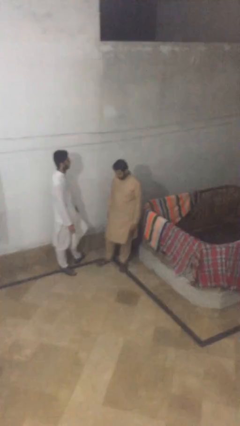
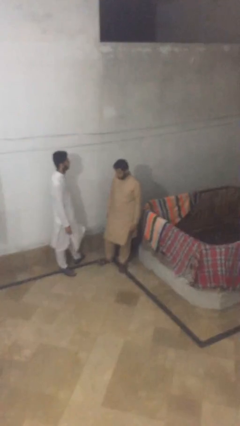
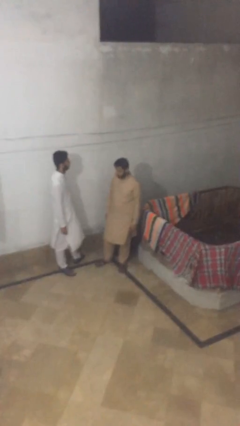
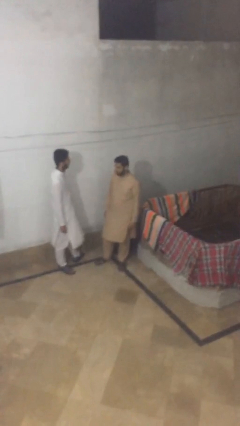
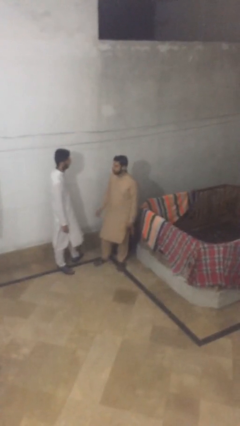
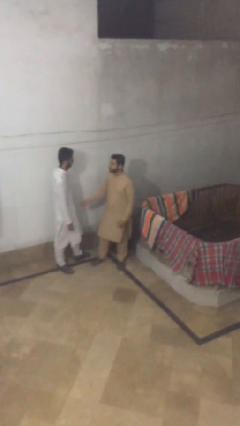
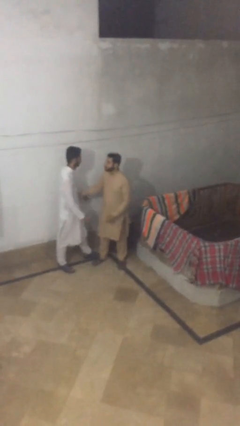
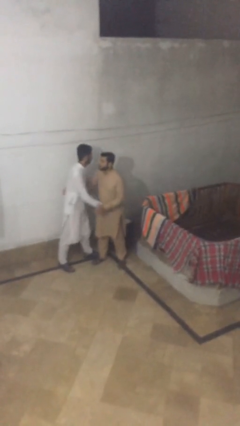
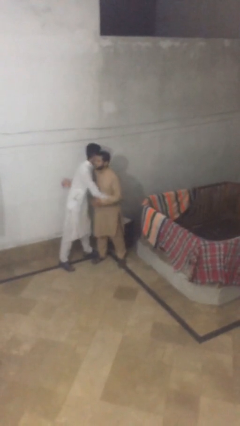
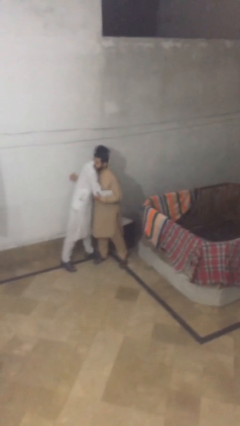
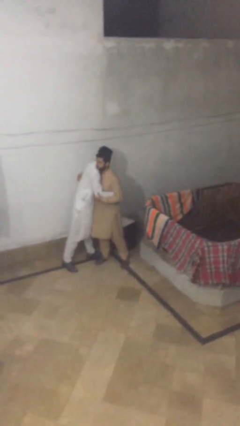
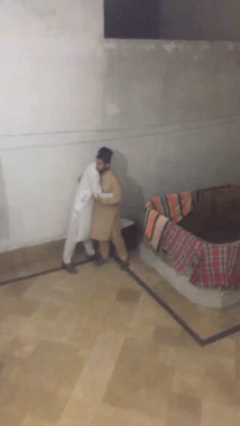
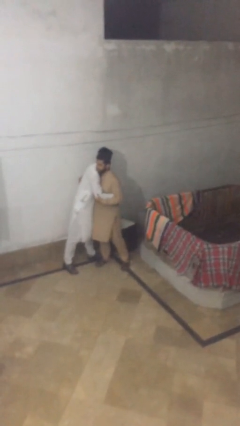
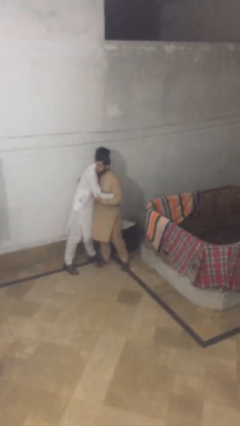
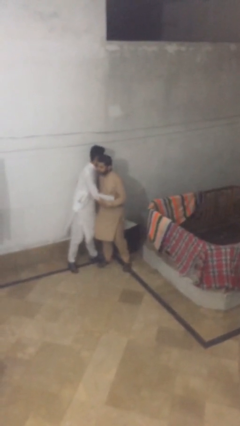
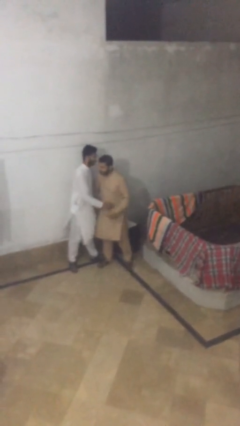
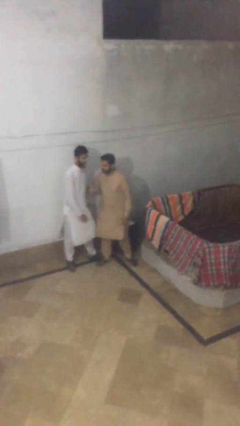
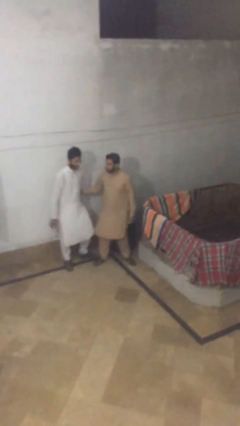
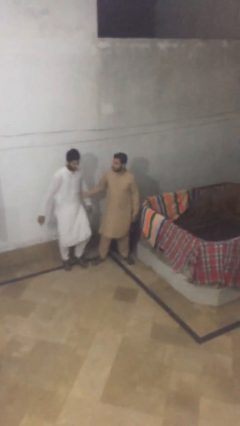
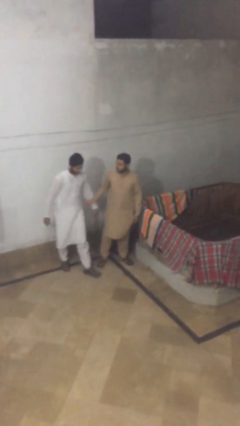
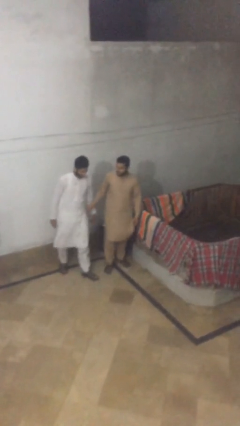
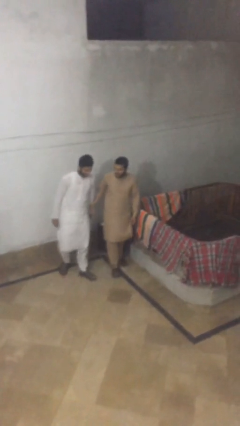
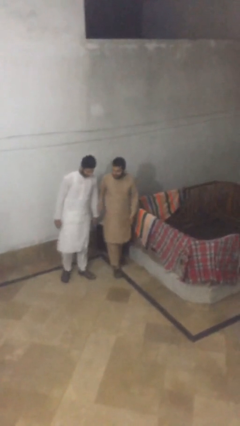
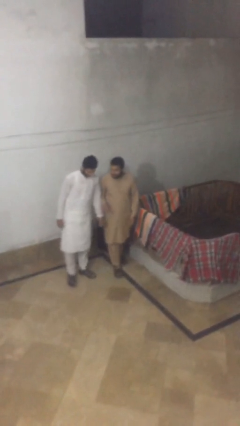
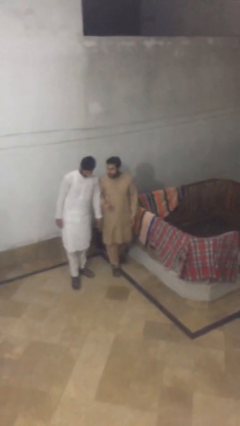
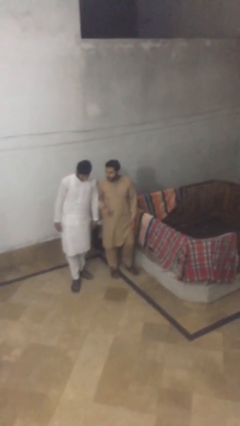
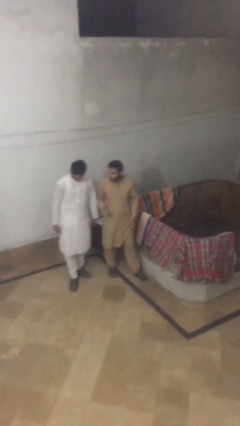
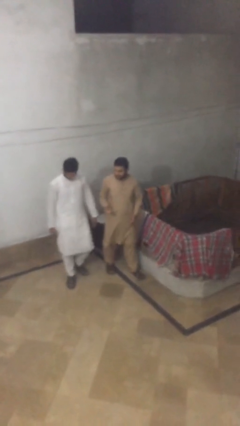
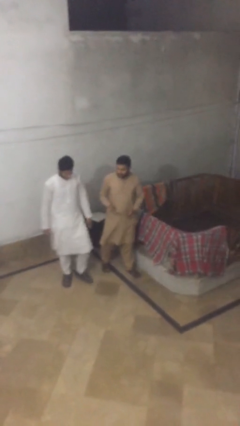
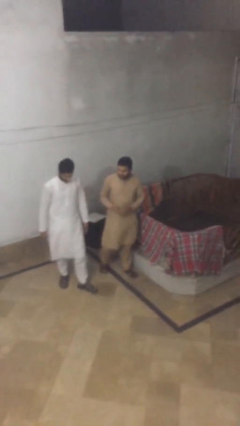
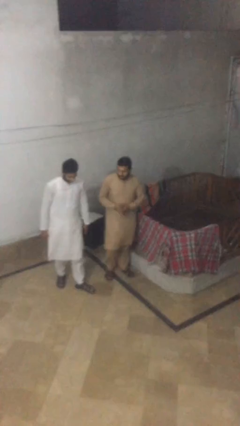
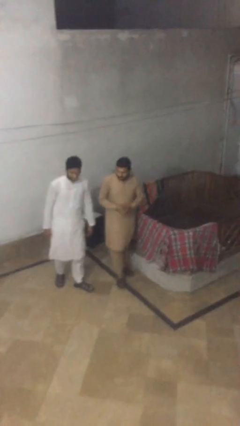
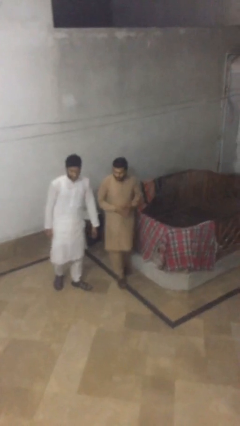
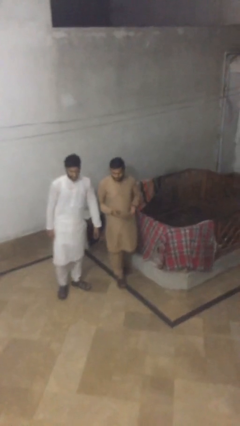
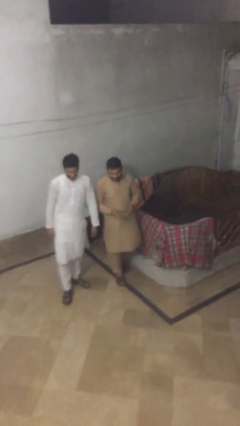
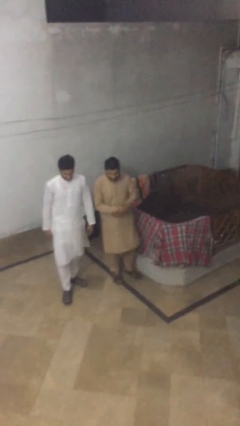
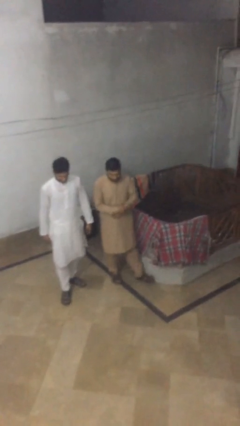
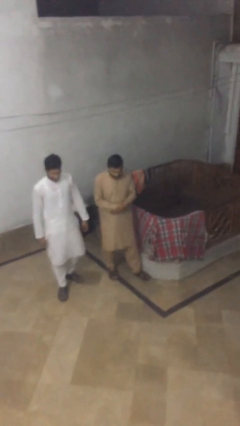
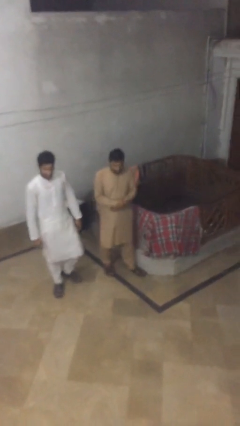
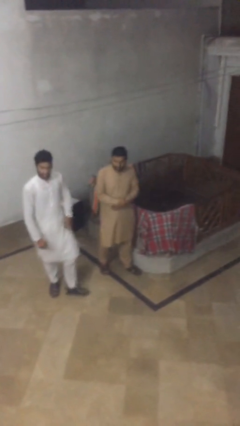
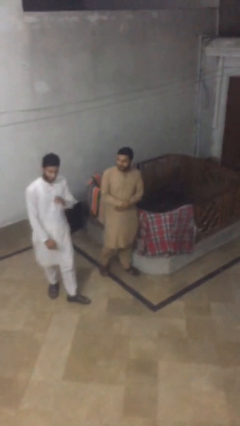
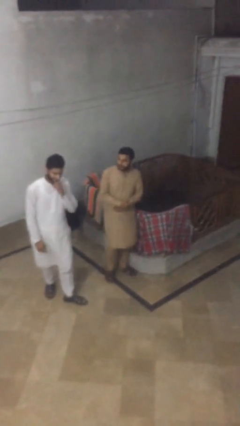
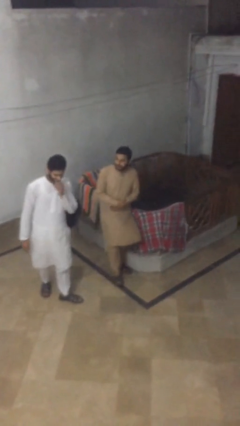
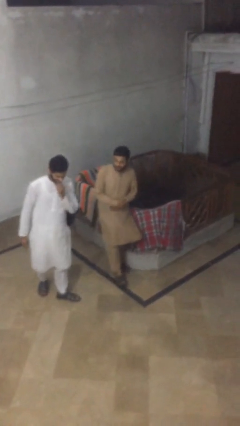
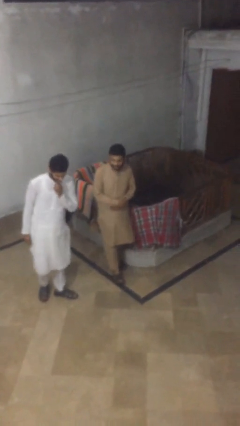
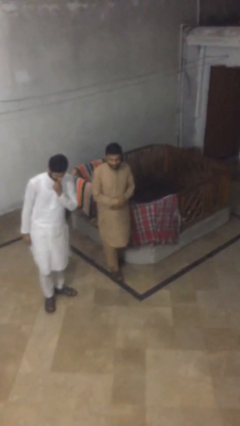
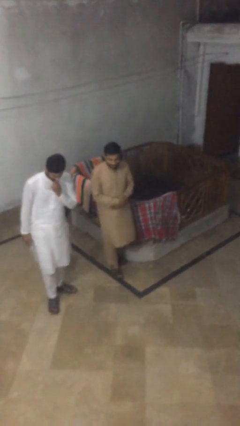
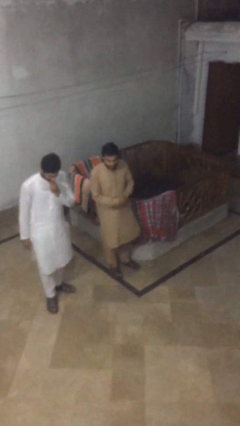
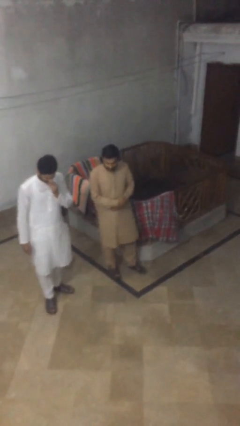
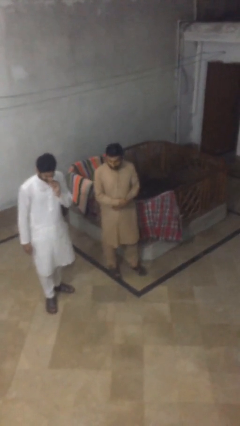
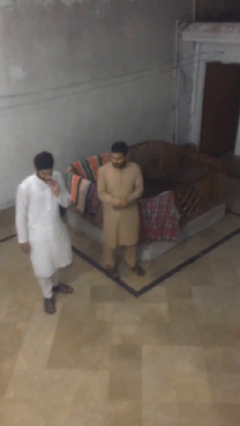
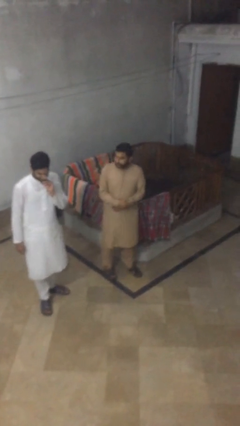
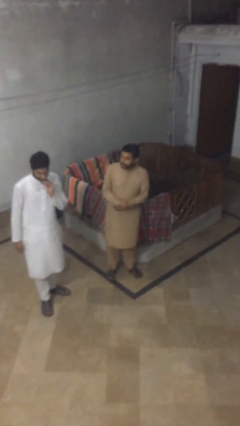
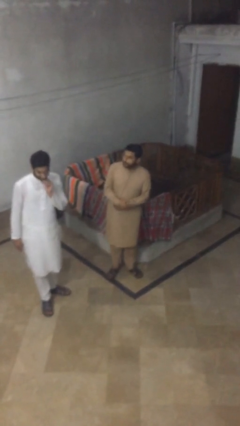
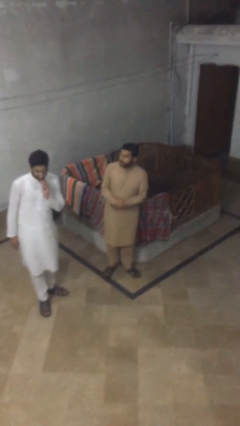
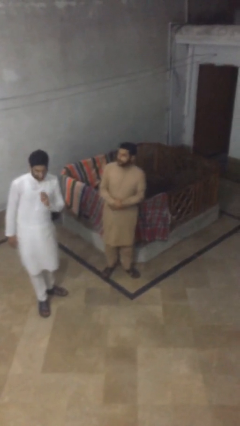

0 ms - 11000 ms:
person embraces person

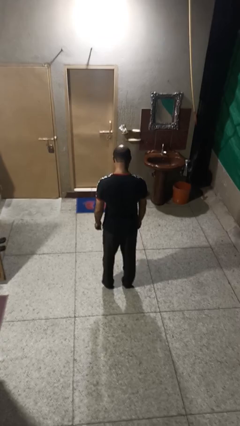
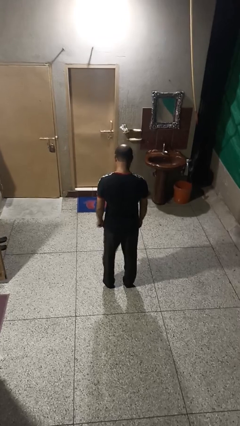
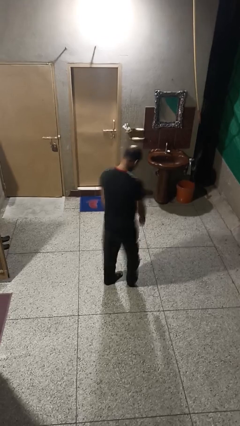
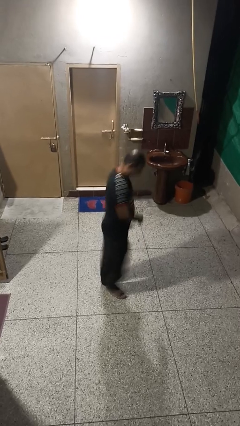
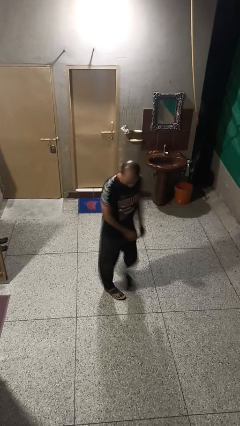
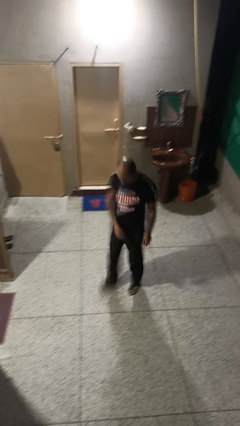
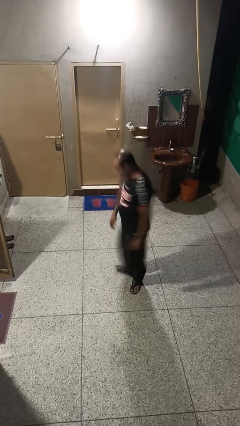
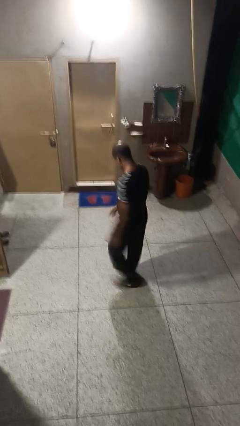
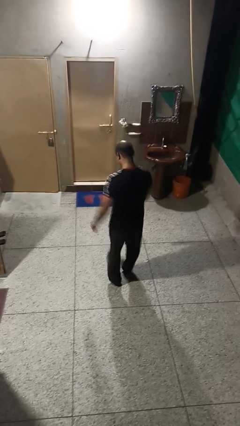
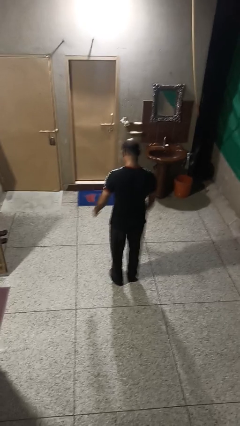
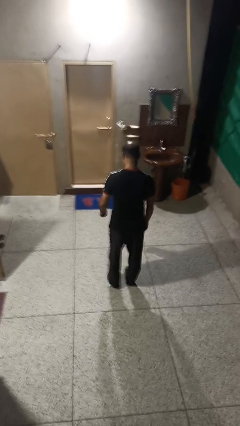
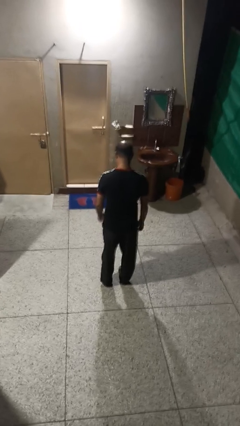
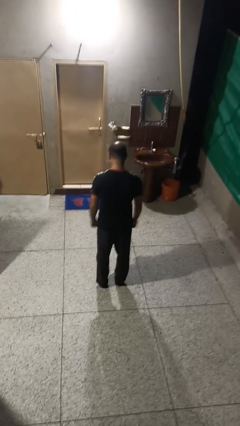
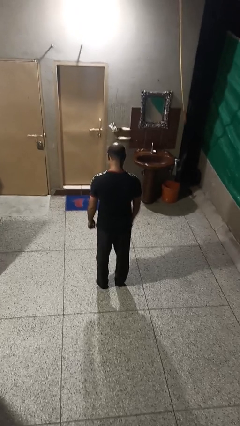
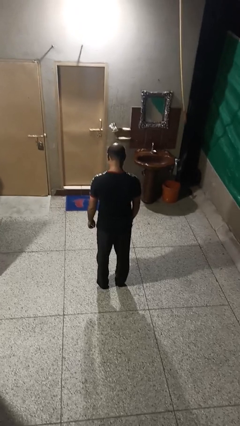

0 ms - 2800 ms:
person twirls

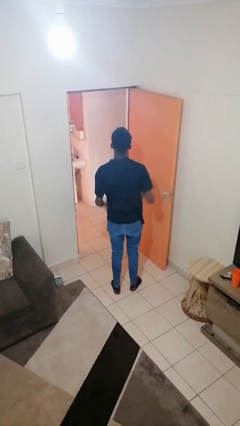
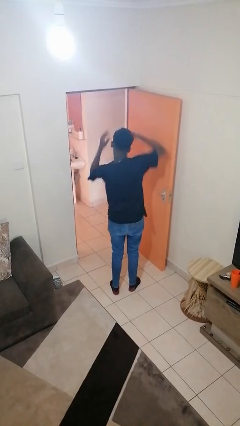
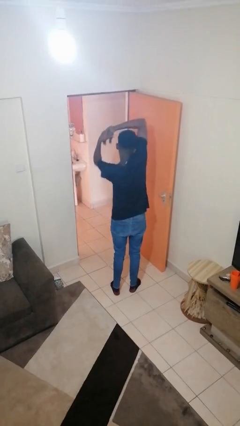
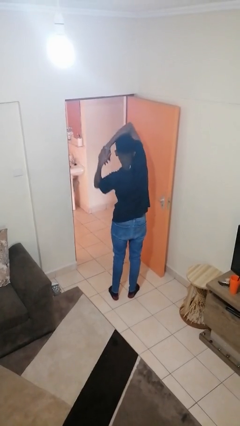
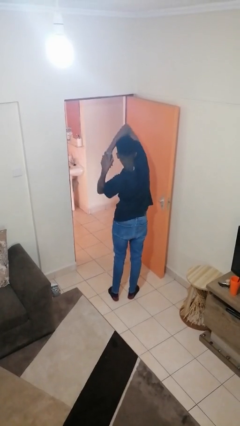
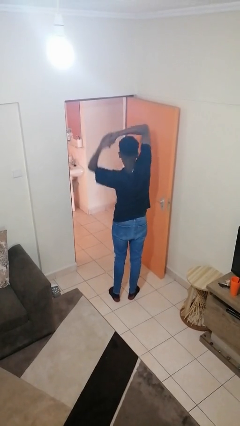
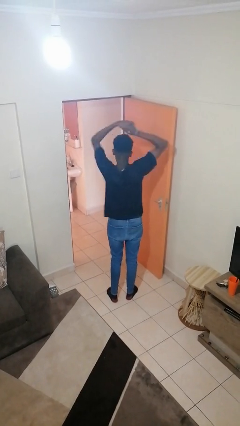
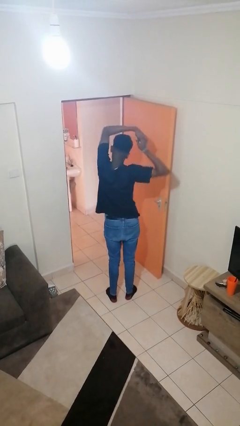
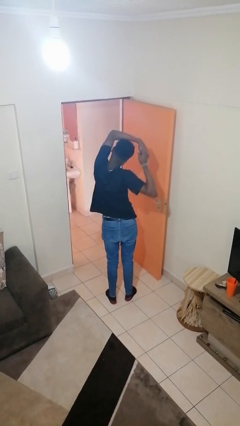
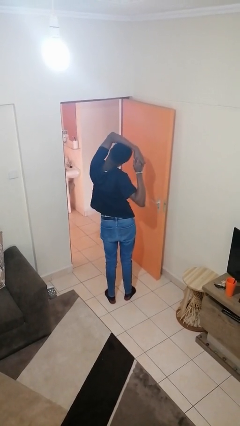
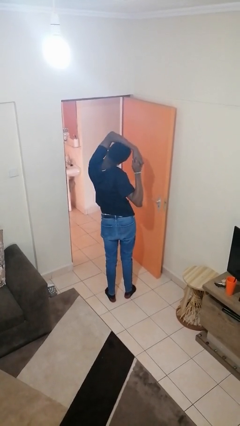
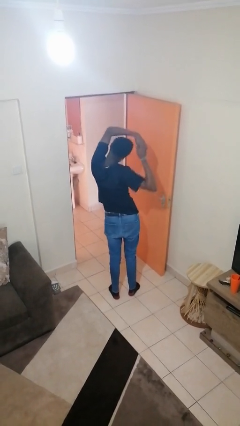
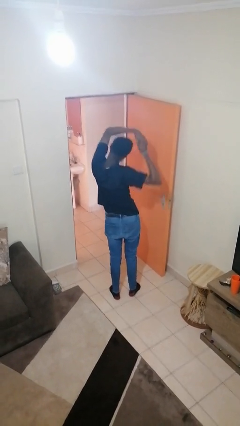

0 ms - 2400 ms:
person stretches arms over head

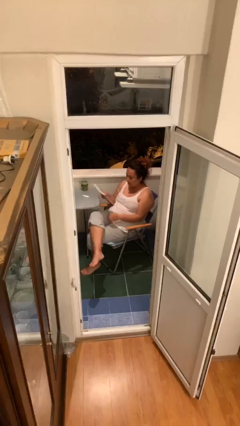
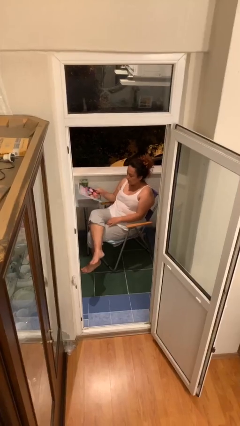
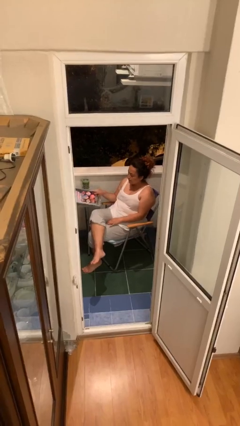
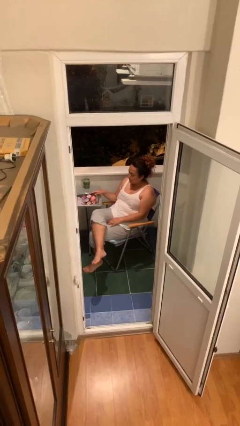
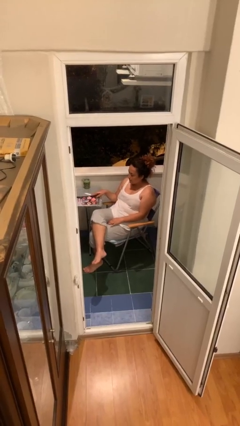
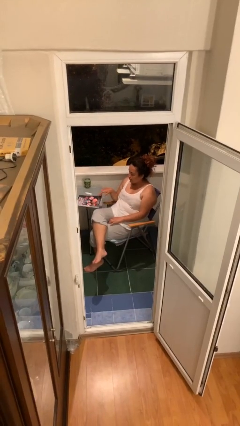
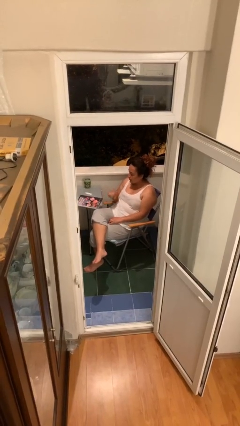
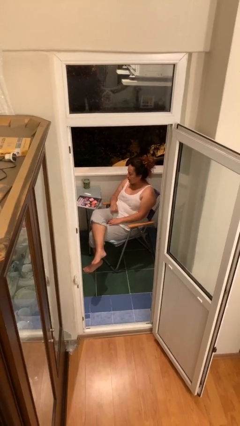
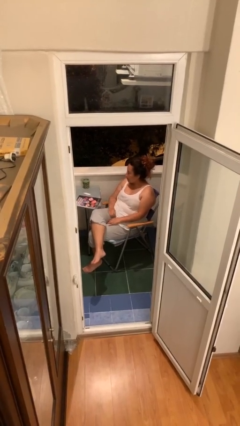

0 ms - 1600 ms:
person puts down object on table

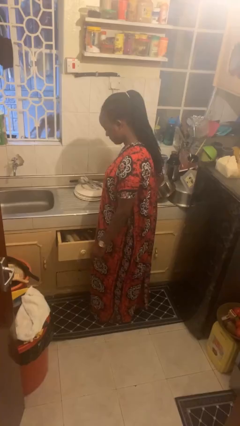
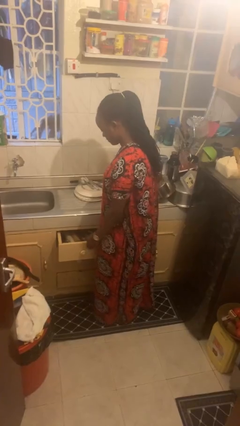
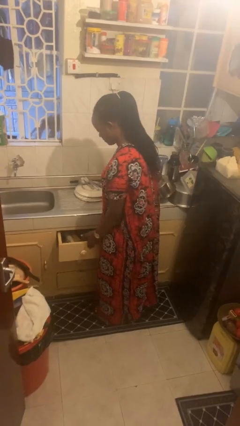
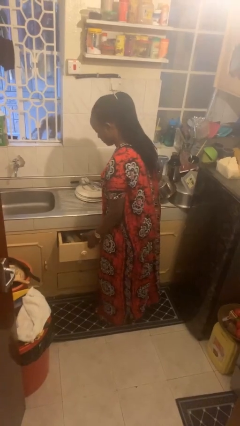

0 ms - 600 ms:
person closes kitchen drawer
